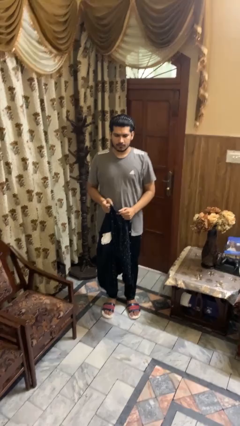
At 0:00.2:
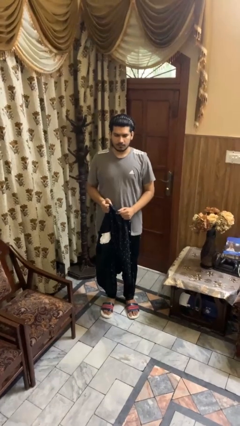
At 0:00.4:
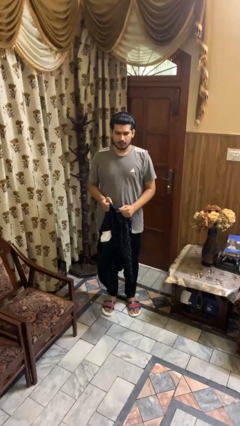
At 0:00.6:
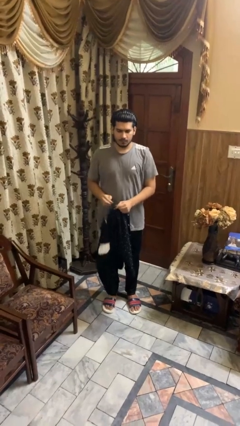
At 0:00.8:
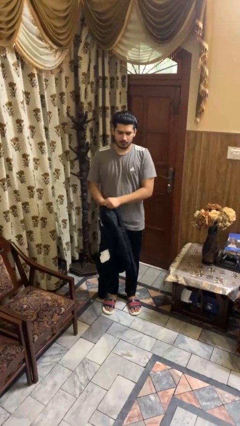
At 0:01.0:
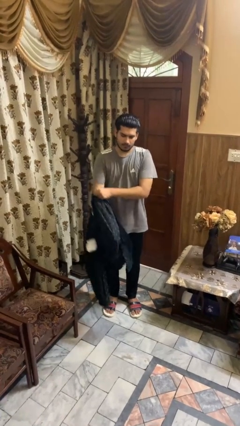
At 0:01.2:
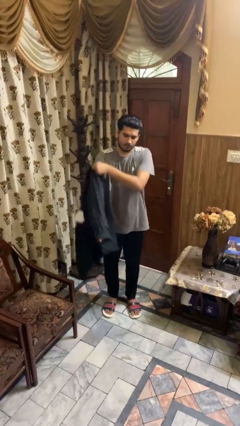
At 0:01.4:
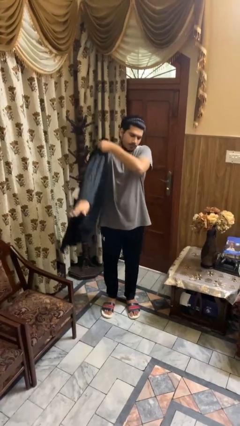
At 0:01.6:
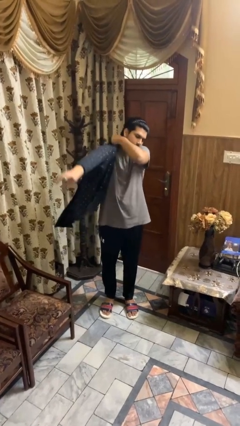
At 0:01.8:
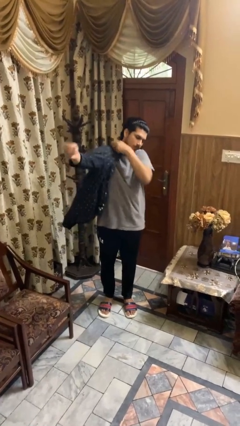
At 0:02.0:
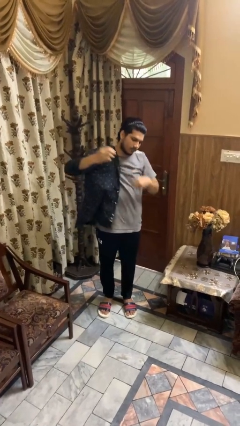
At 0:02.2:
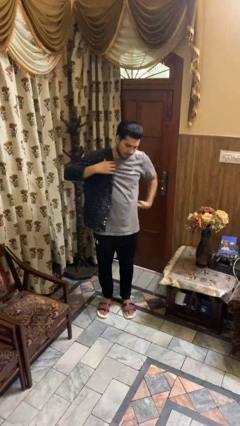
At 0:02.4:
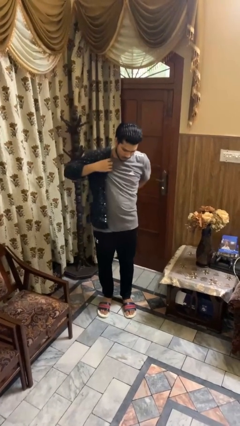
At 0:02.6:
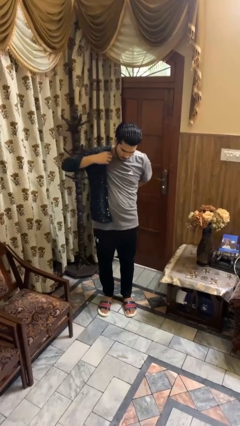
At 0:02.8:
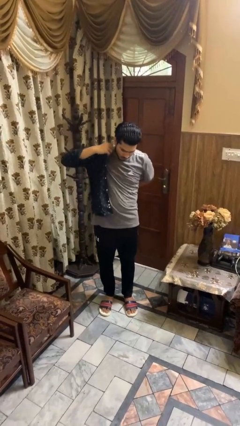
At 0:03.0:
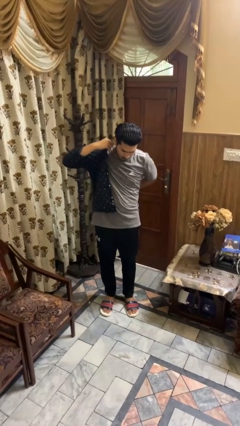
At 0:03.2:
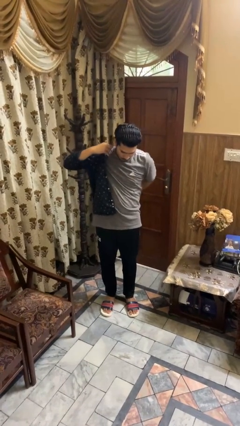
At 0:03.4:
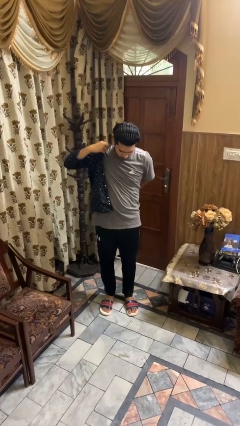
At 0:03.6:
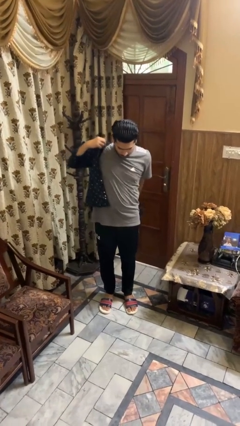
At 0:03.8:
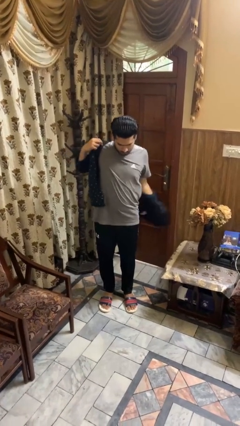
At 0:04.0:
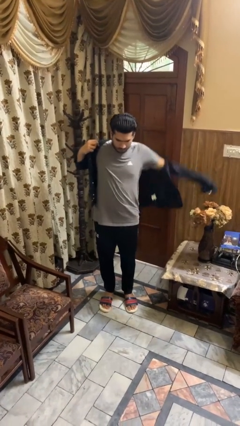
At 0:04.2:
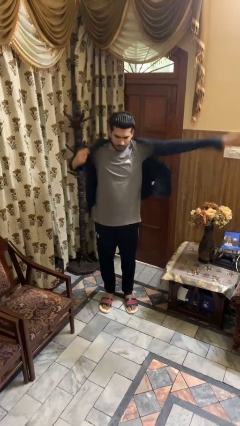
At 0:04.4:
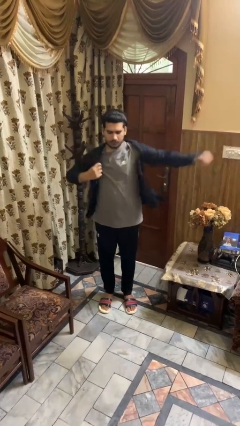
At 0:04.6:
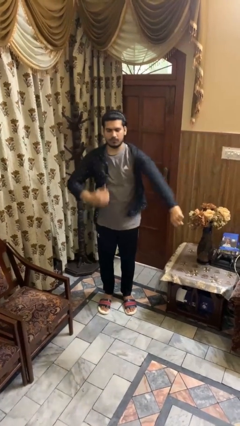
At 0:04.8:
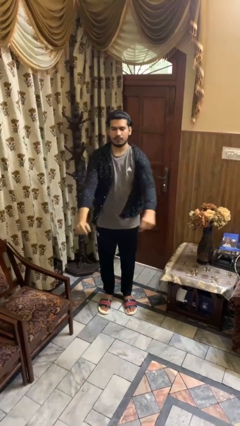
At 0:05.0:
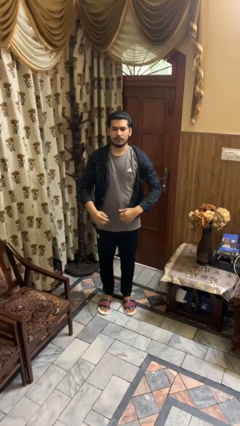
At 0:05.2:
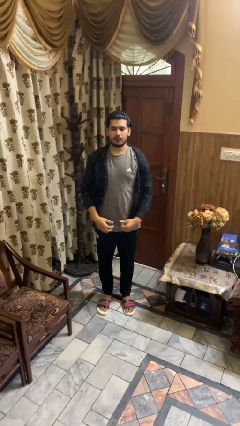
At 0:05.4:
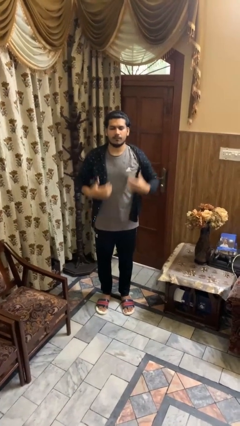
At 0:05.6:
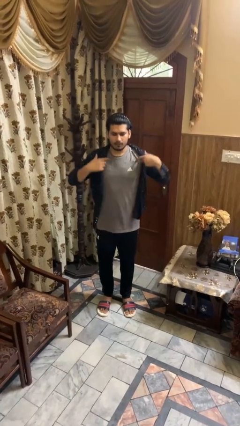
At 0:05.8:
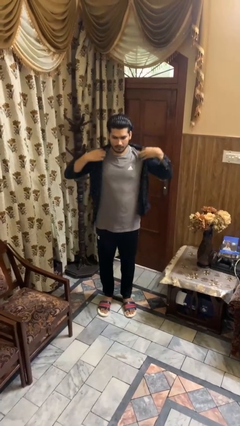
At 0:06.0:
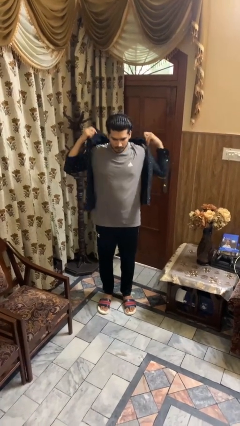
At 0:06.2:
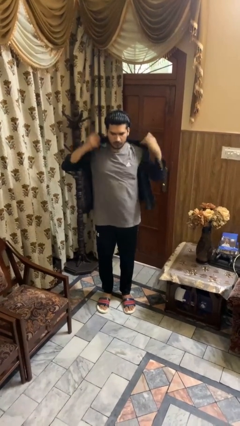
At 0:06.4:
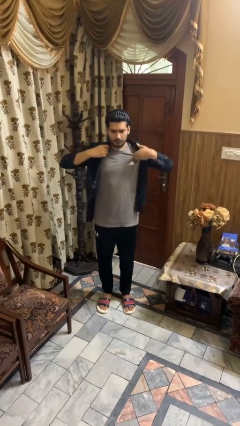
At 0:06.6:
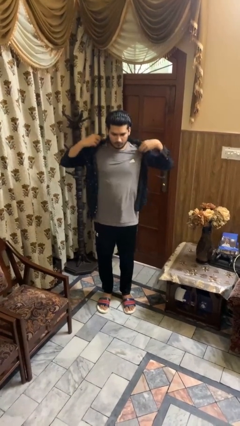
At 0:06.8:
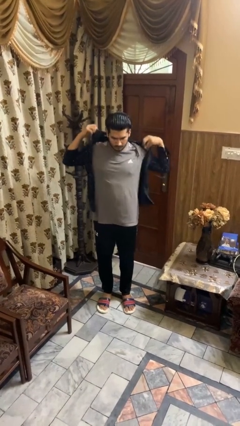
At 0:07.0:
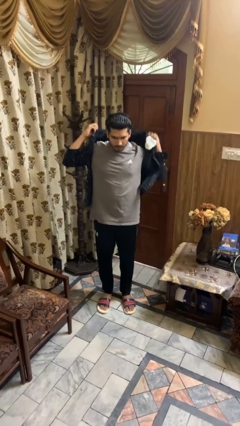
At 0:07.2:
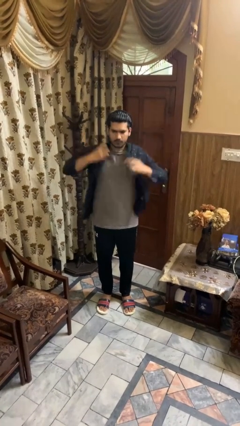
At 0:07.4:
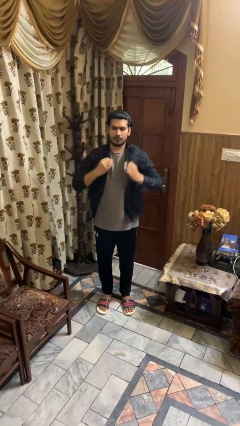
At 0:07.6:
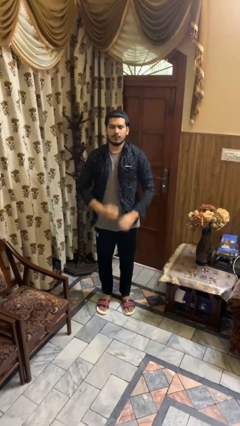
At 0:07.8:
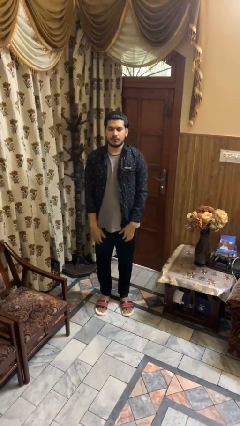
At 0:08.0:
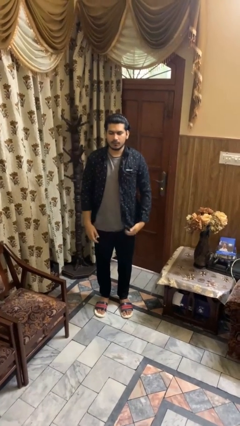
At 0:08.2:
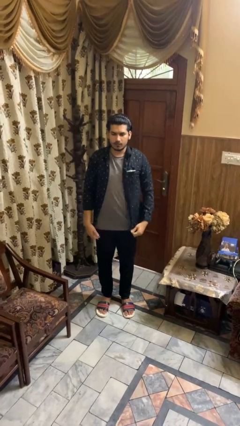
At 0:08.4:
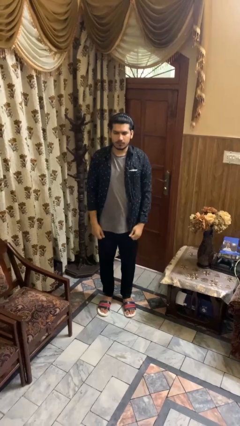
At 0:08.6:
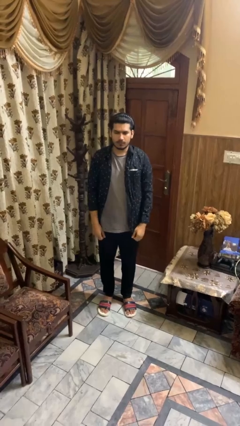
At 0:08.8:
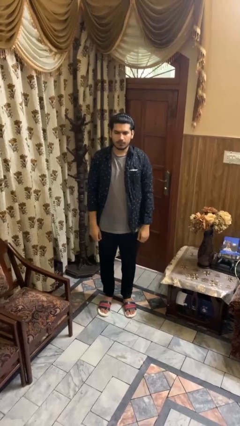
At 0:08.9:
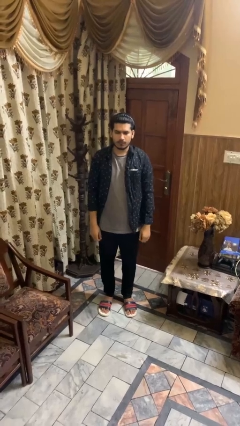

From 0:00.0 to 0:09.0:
person puts on shirt

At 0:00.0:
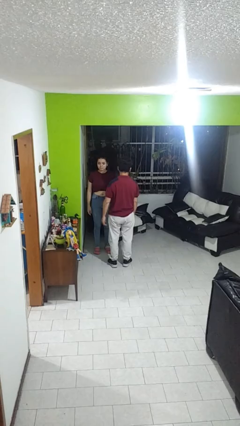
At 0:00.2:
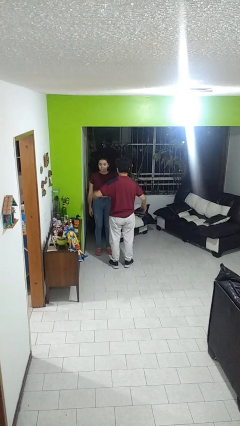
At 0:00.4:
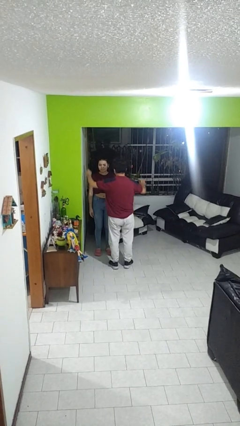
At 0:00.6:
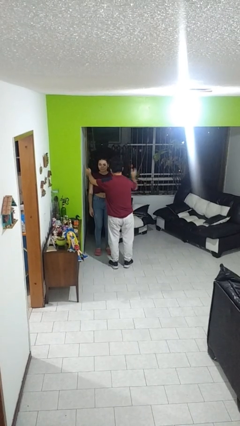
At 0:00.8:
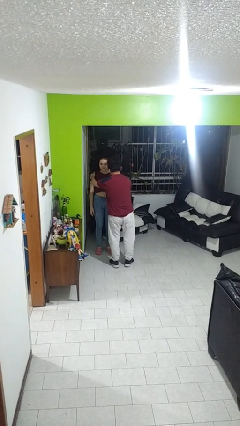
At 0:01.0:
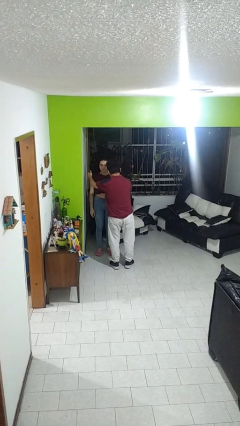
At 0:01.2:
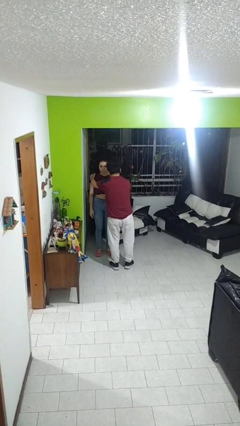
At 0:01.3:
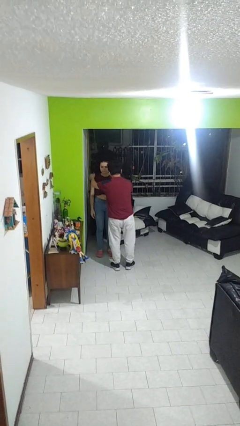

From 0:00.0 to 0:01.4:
person pounds shoulders of person

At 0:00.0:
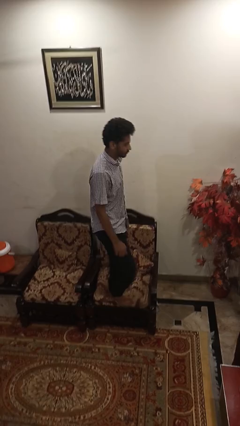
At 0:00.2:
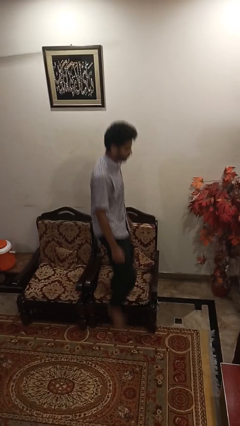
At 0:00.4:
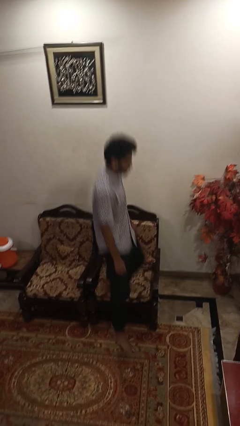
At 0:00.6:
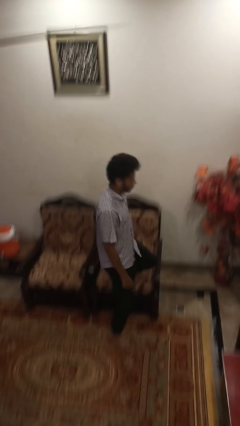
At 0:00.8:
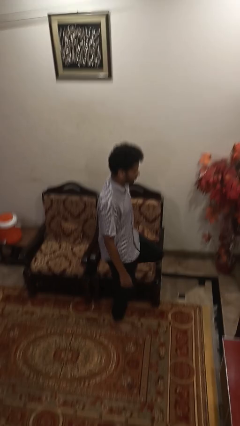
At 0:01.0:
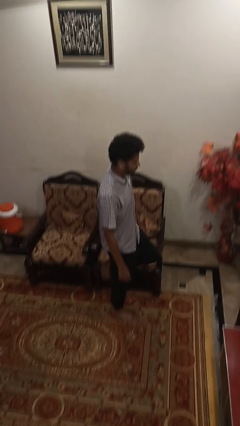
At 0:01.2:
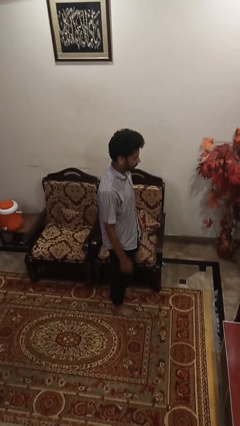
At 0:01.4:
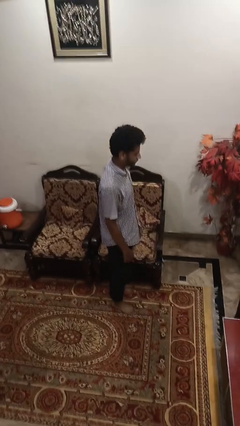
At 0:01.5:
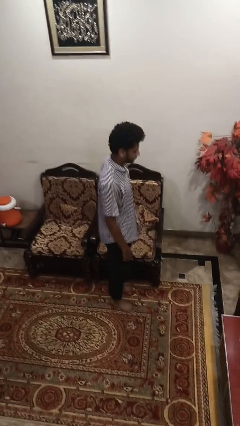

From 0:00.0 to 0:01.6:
person climbs off couch

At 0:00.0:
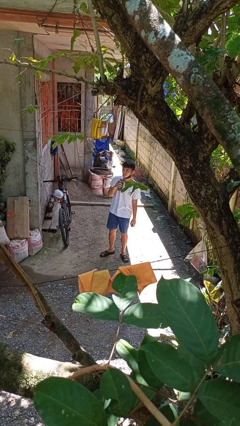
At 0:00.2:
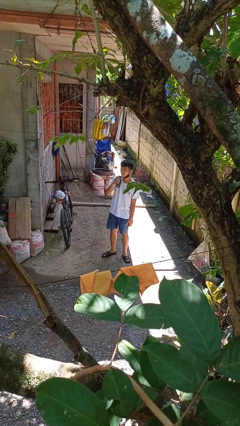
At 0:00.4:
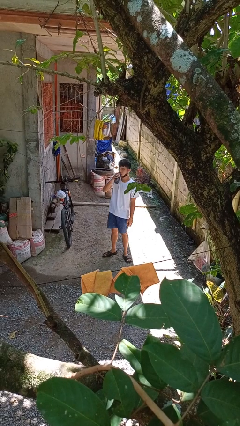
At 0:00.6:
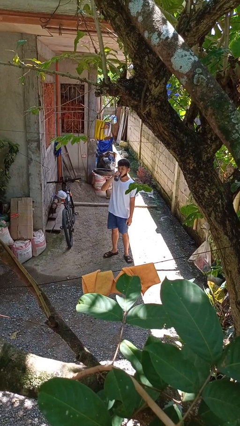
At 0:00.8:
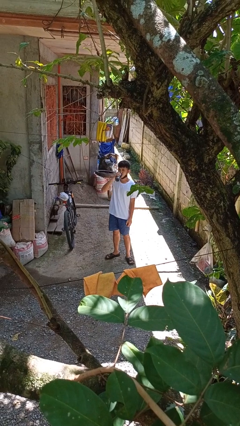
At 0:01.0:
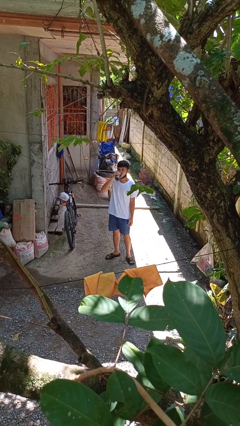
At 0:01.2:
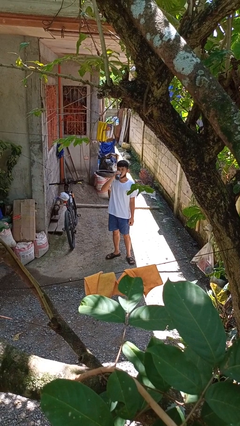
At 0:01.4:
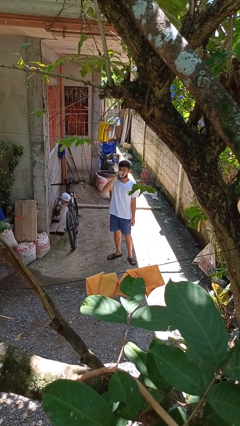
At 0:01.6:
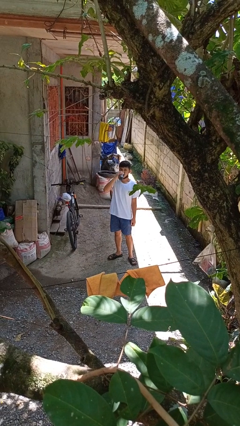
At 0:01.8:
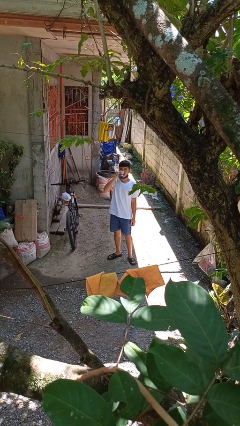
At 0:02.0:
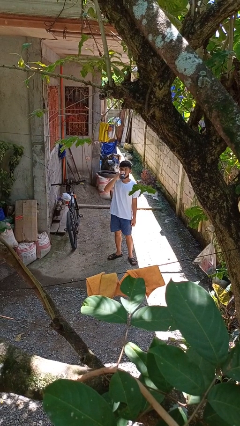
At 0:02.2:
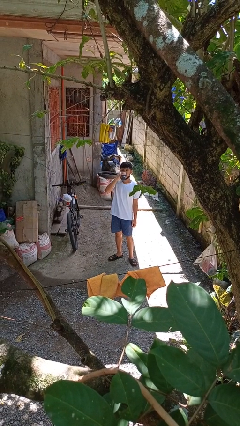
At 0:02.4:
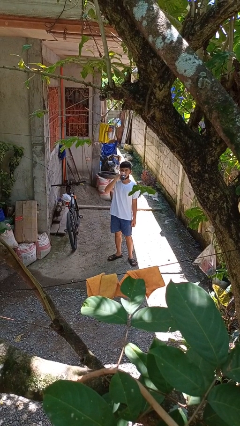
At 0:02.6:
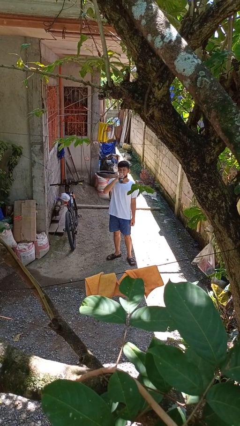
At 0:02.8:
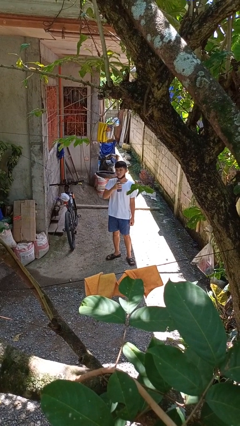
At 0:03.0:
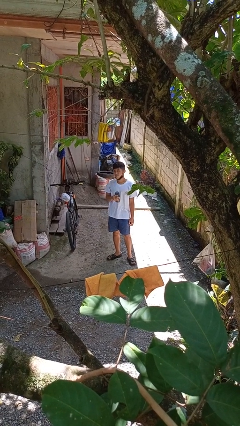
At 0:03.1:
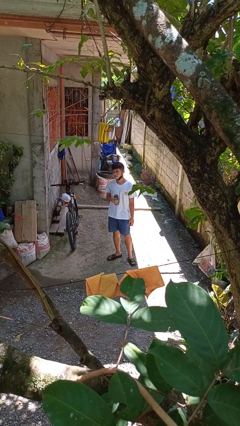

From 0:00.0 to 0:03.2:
person drinks from bottle

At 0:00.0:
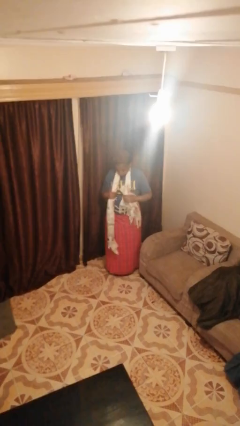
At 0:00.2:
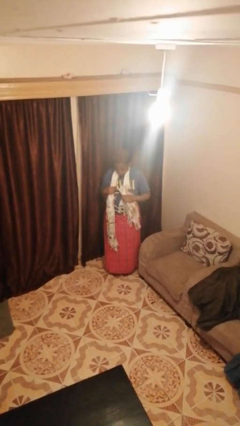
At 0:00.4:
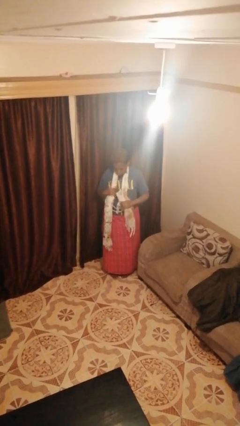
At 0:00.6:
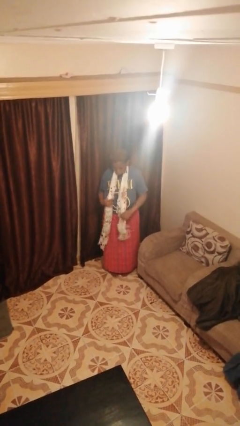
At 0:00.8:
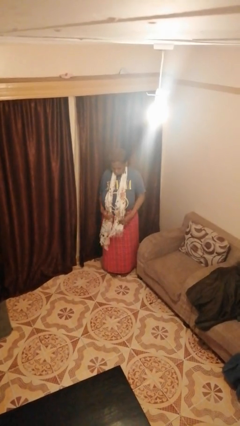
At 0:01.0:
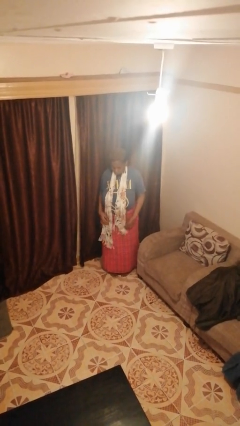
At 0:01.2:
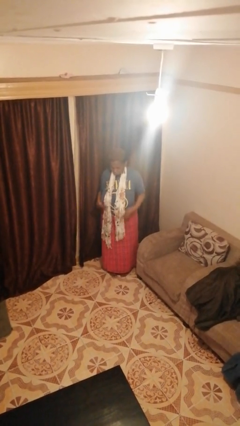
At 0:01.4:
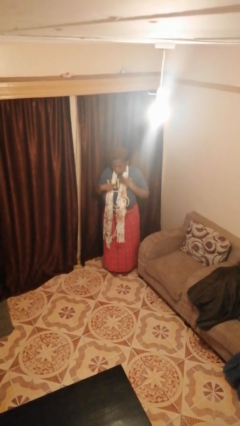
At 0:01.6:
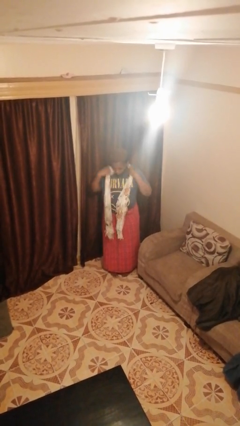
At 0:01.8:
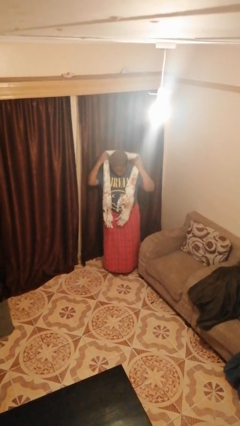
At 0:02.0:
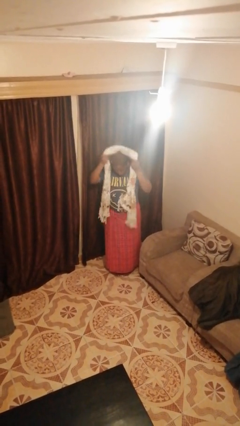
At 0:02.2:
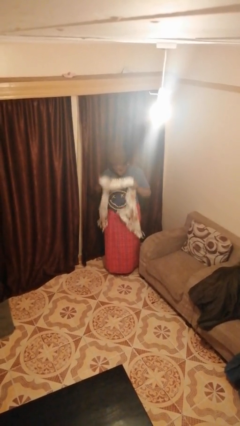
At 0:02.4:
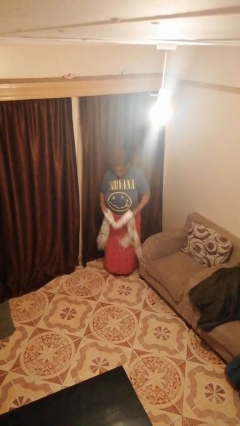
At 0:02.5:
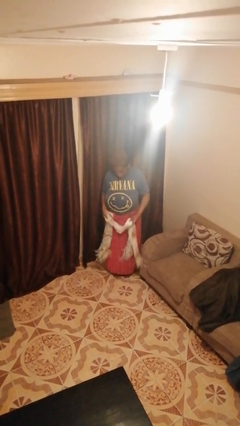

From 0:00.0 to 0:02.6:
person takes off scarf
